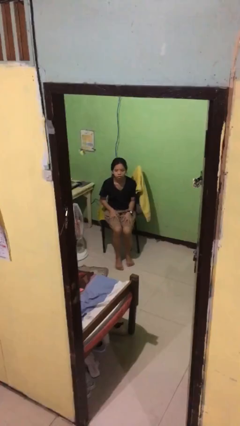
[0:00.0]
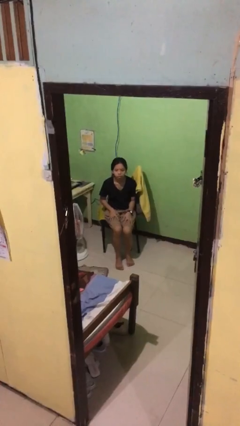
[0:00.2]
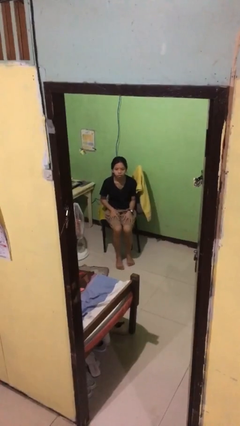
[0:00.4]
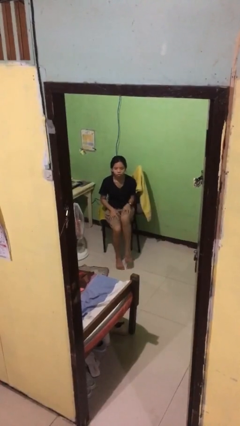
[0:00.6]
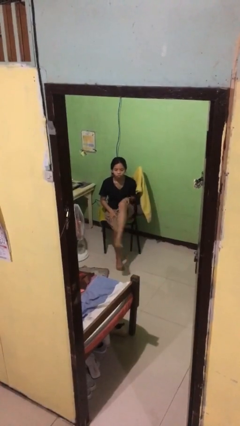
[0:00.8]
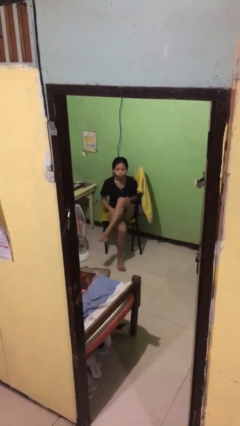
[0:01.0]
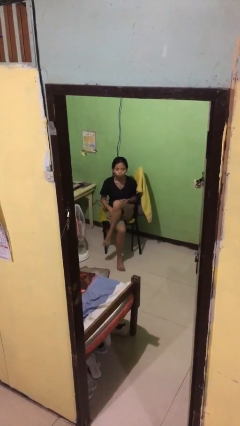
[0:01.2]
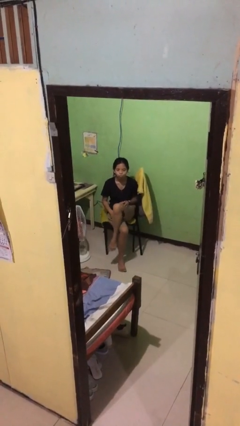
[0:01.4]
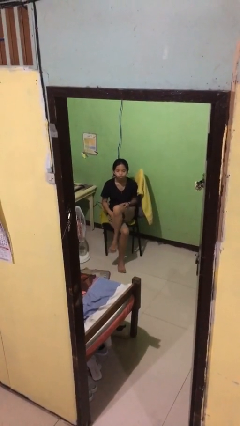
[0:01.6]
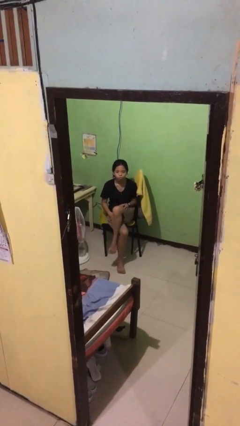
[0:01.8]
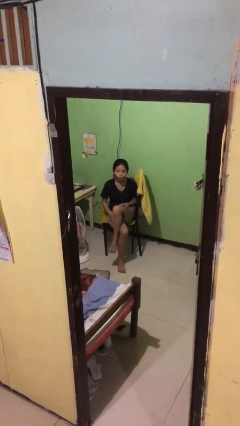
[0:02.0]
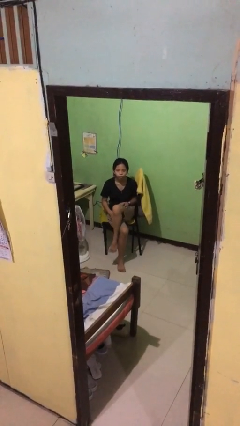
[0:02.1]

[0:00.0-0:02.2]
person crosses legs

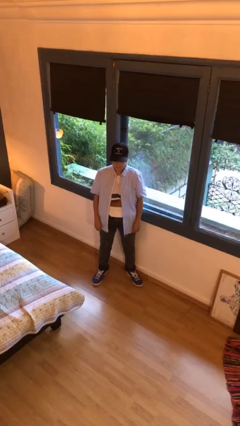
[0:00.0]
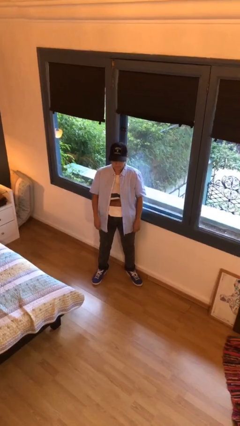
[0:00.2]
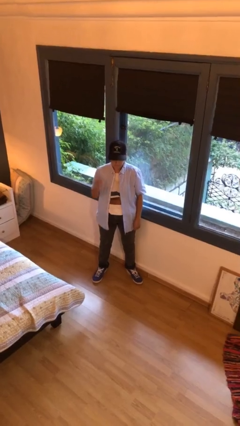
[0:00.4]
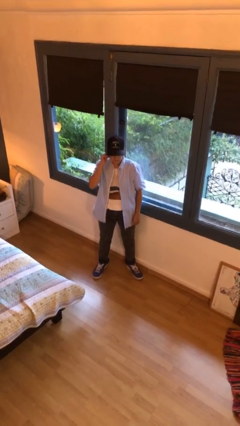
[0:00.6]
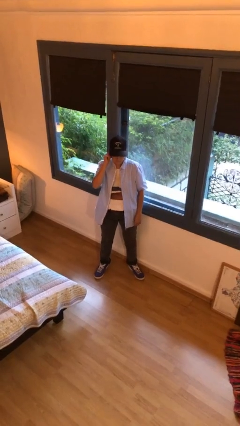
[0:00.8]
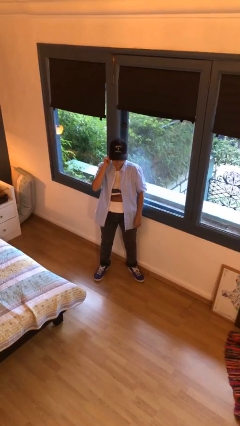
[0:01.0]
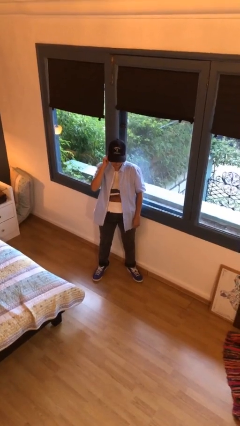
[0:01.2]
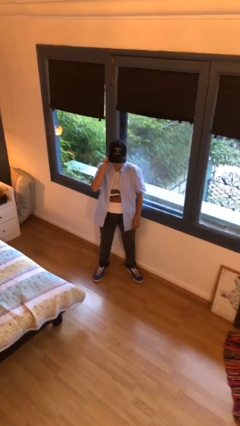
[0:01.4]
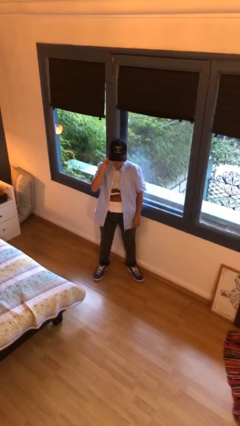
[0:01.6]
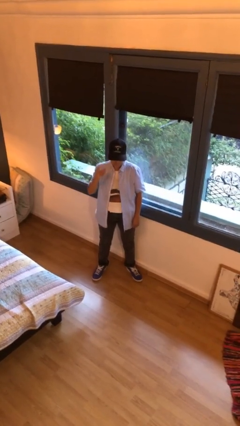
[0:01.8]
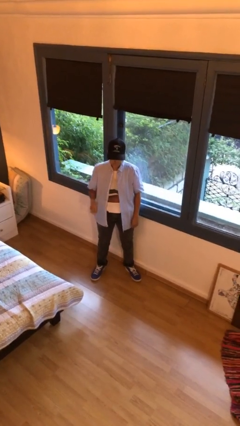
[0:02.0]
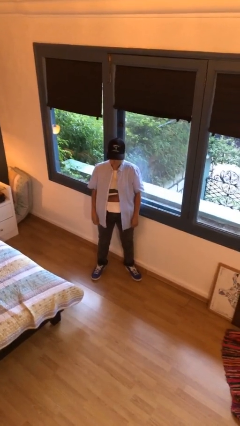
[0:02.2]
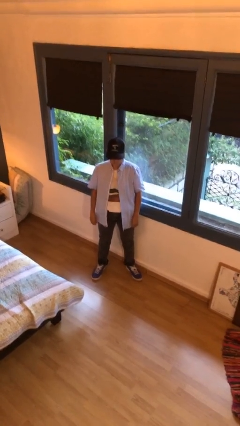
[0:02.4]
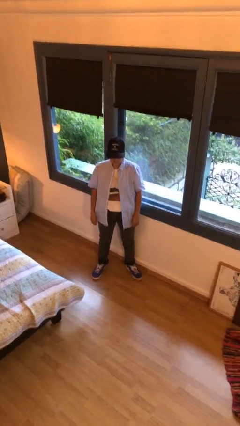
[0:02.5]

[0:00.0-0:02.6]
person touches earlobe

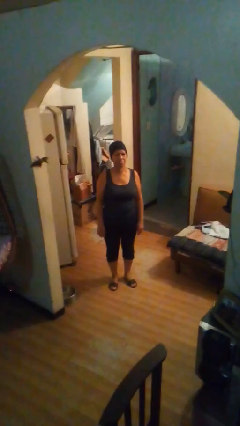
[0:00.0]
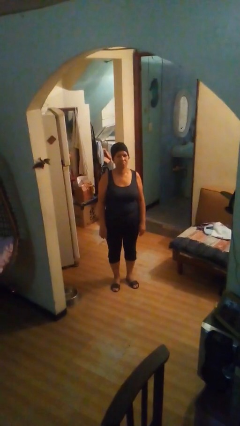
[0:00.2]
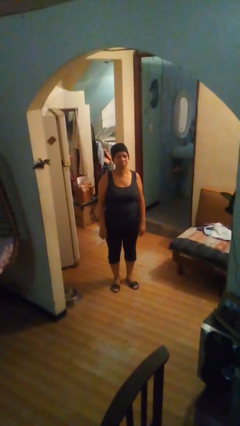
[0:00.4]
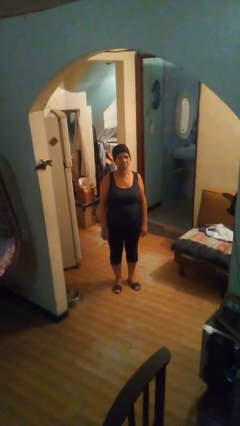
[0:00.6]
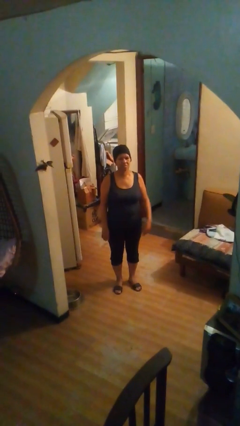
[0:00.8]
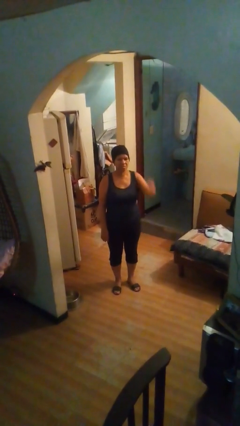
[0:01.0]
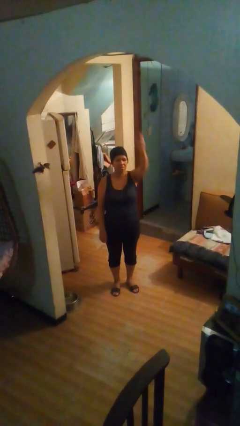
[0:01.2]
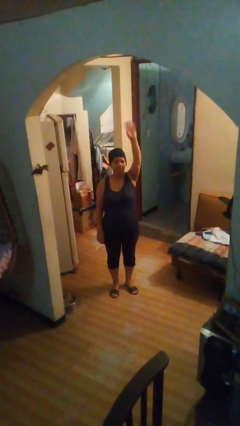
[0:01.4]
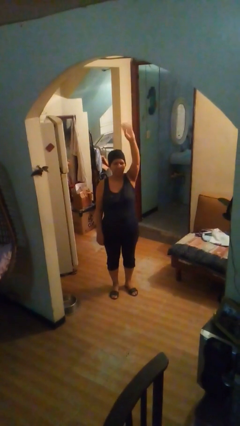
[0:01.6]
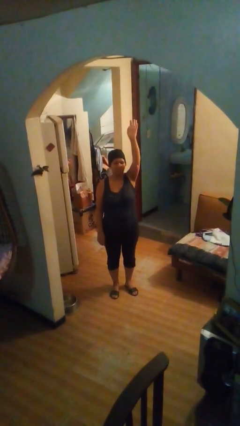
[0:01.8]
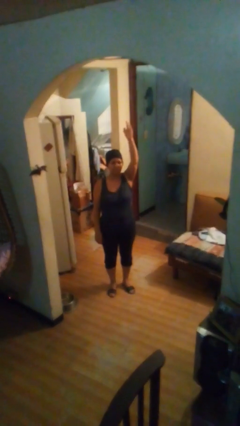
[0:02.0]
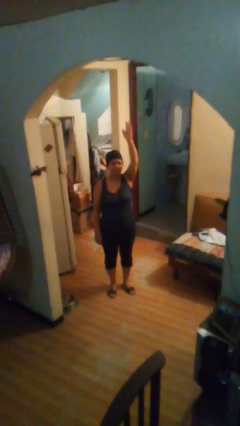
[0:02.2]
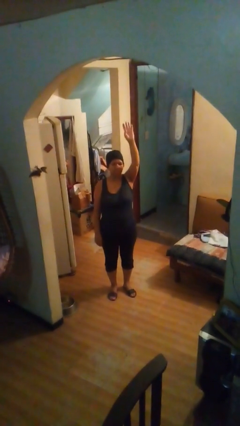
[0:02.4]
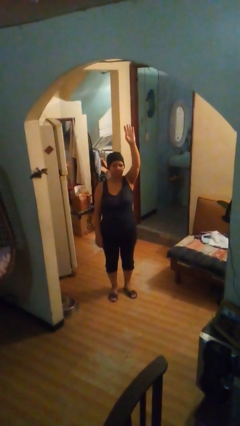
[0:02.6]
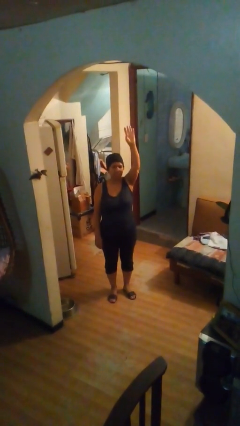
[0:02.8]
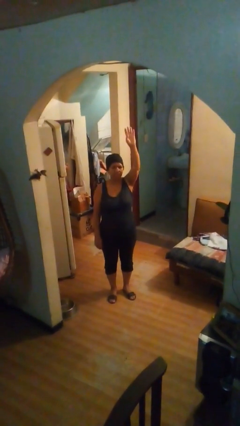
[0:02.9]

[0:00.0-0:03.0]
person gestures raise hand

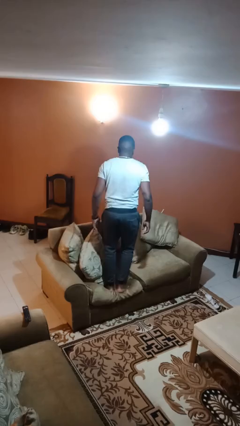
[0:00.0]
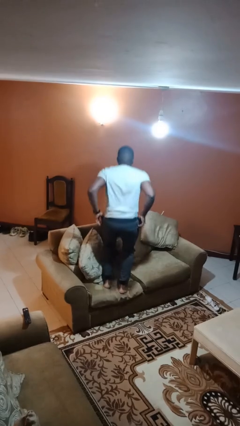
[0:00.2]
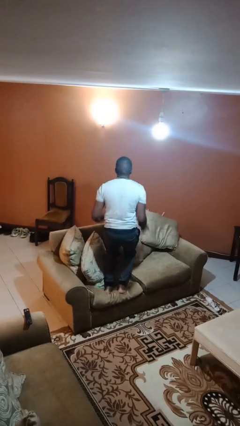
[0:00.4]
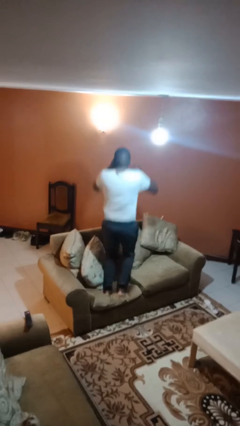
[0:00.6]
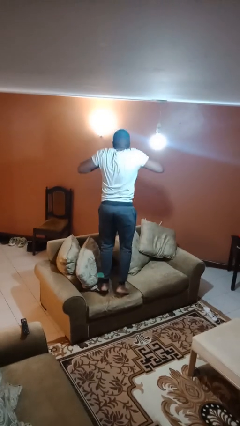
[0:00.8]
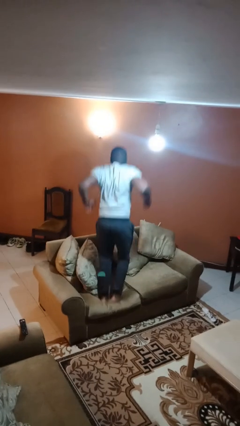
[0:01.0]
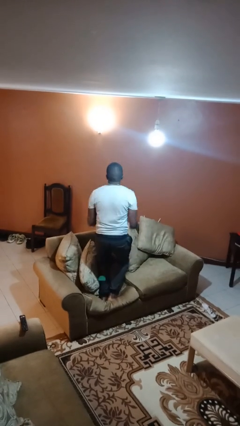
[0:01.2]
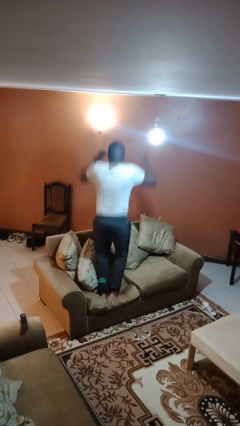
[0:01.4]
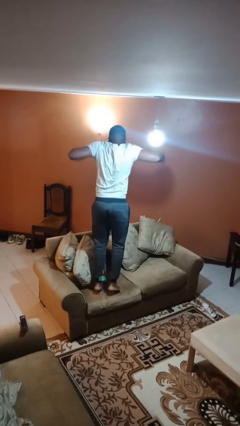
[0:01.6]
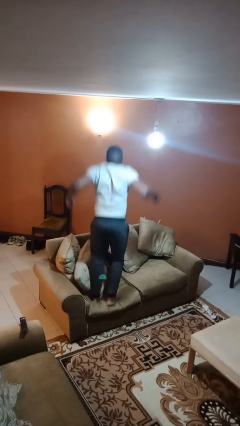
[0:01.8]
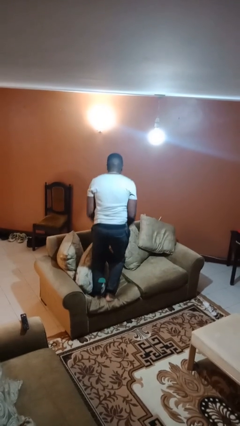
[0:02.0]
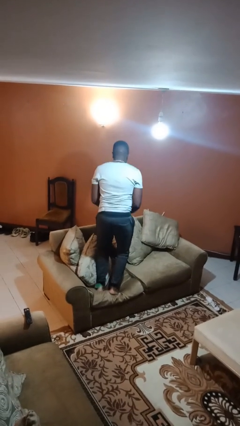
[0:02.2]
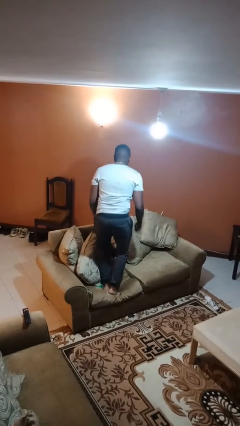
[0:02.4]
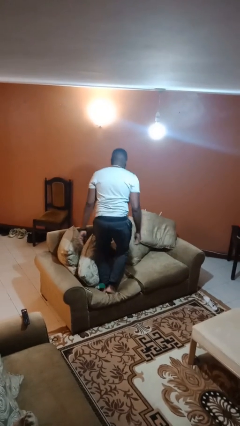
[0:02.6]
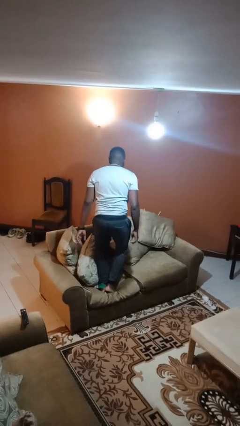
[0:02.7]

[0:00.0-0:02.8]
person jumps on couch

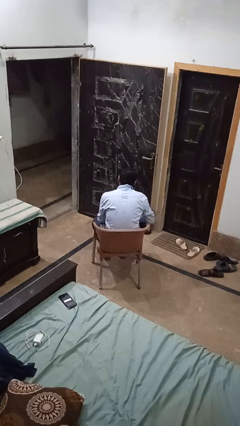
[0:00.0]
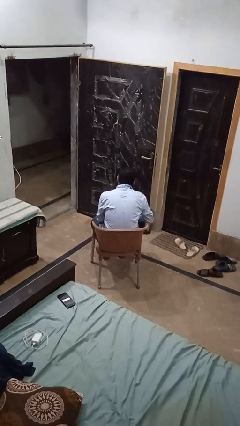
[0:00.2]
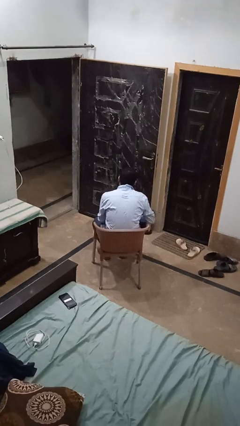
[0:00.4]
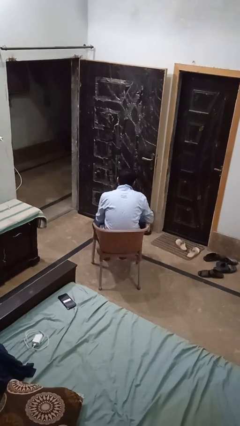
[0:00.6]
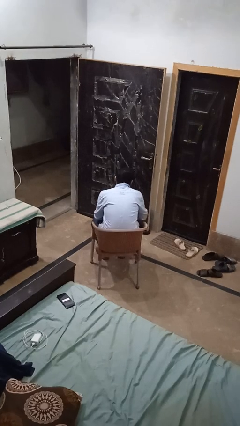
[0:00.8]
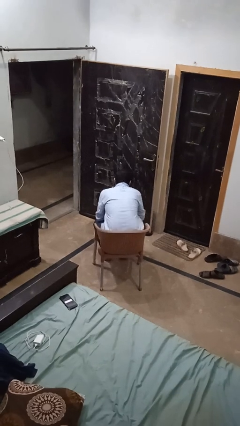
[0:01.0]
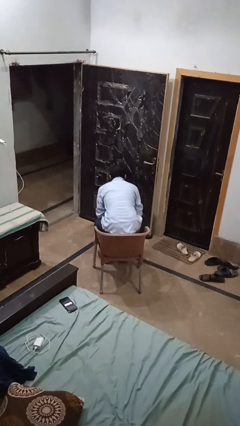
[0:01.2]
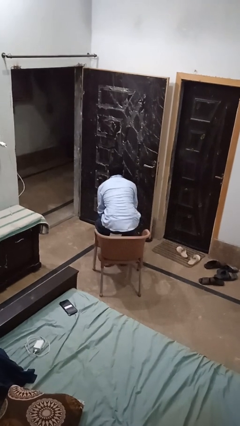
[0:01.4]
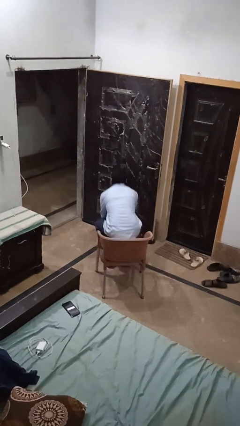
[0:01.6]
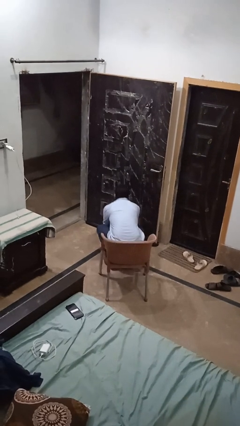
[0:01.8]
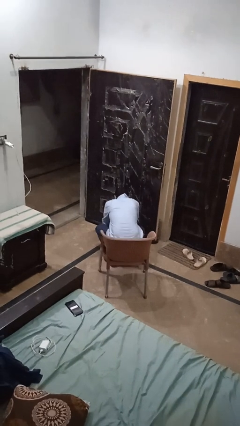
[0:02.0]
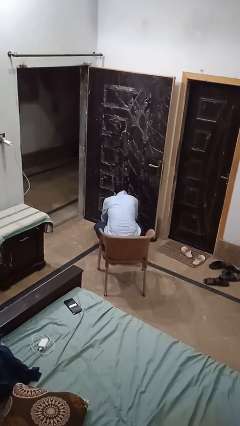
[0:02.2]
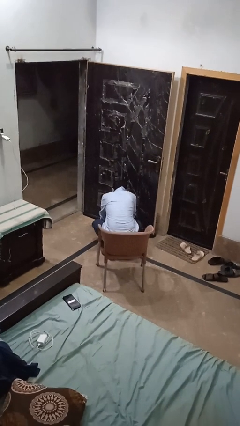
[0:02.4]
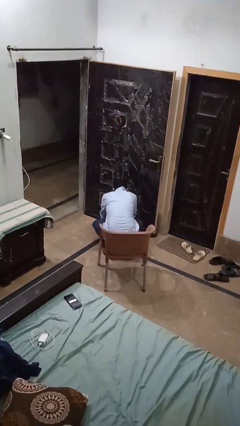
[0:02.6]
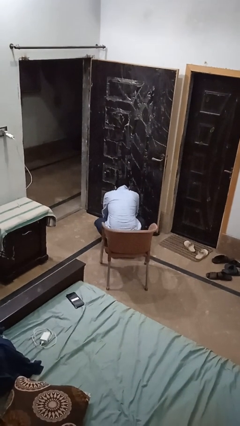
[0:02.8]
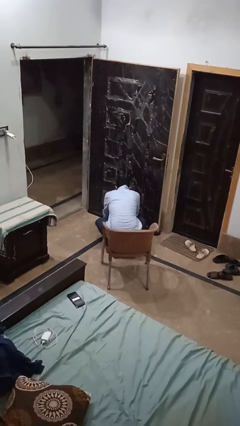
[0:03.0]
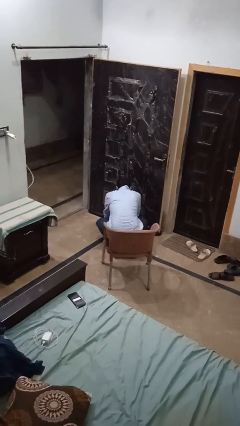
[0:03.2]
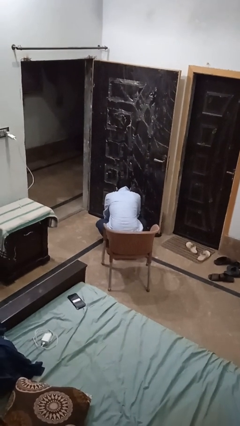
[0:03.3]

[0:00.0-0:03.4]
person falls from chair

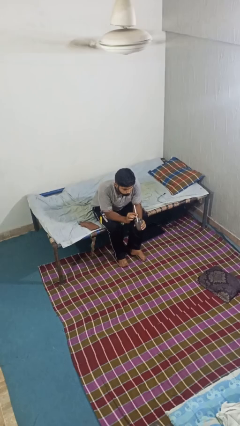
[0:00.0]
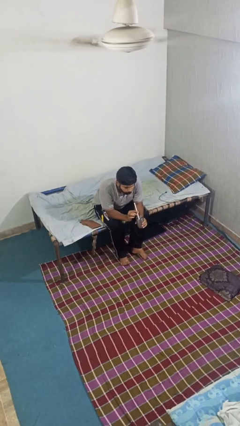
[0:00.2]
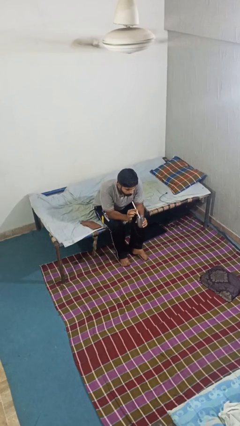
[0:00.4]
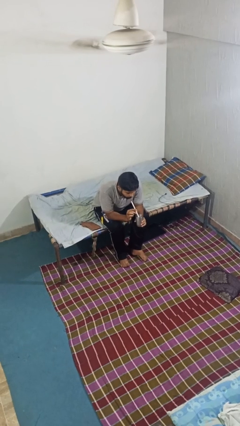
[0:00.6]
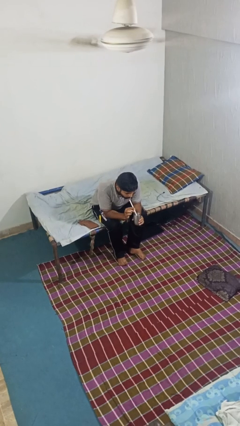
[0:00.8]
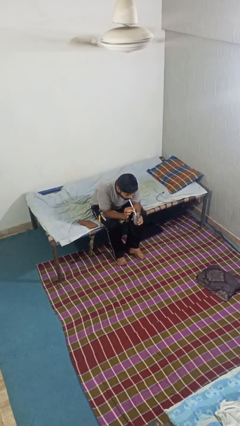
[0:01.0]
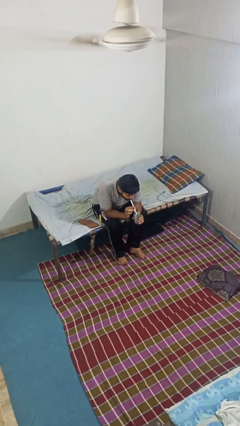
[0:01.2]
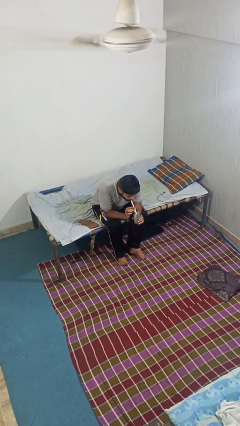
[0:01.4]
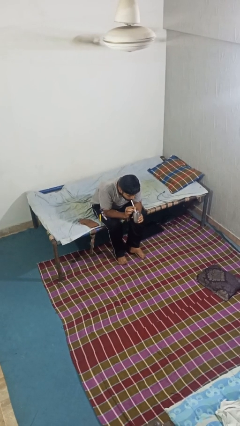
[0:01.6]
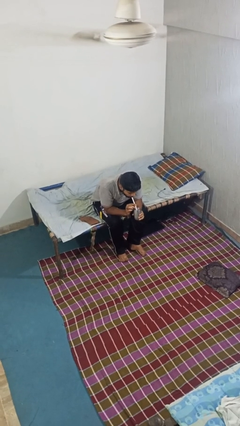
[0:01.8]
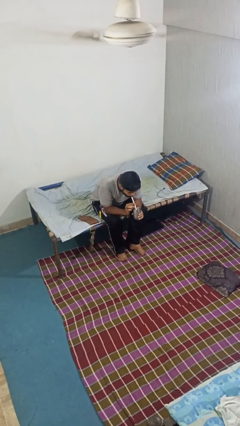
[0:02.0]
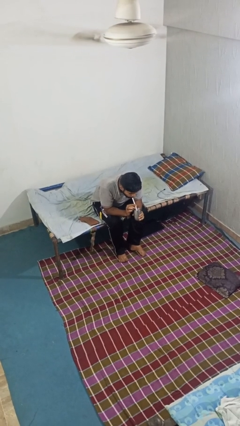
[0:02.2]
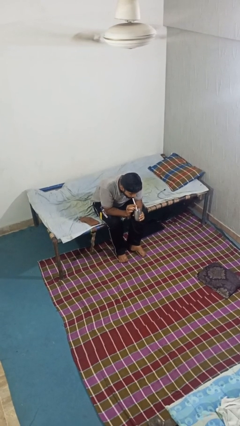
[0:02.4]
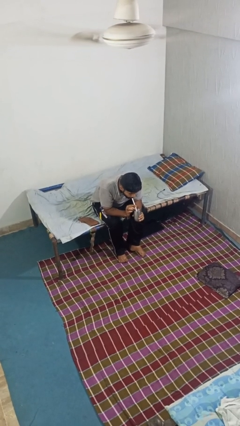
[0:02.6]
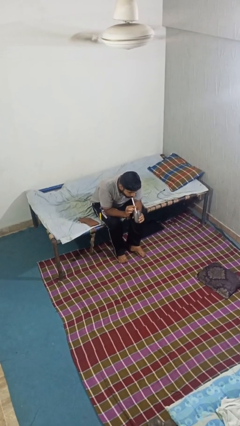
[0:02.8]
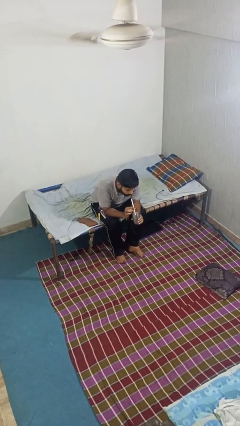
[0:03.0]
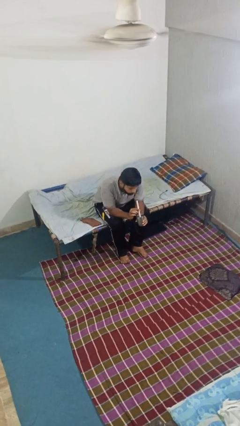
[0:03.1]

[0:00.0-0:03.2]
person drinks from straw

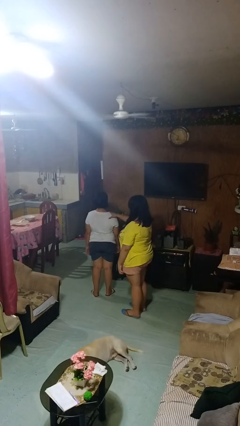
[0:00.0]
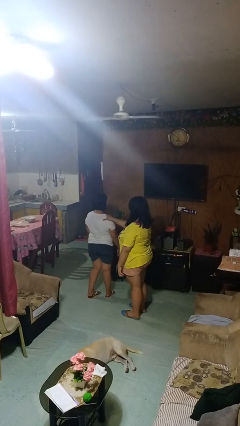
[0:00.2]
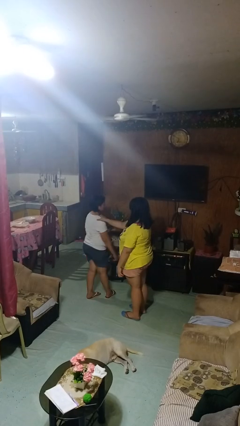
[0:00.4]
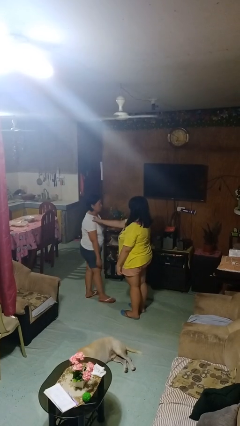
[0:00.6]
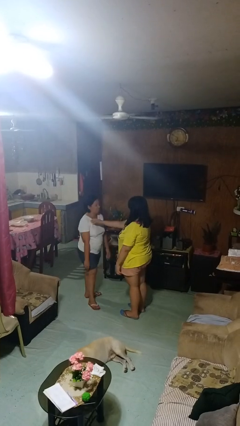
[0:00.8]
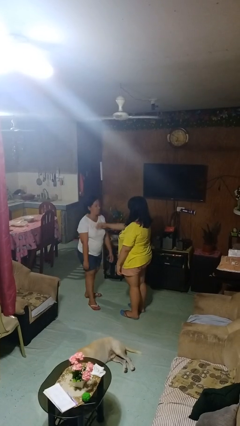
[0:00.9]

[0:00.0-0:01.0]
person spins person around
